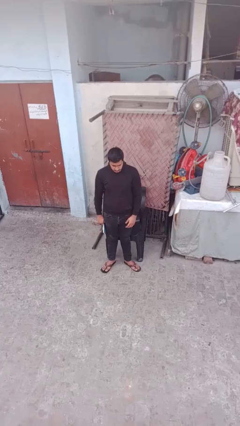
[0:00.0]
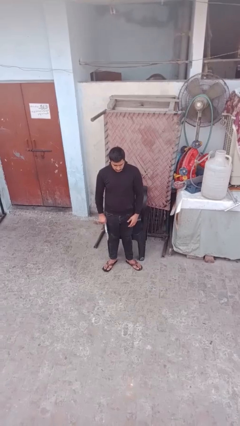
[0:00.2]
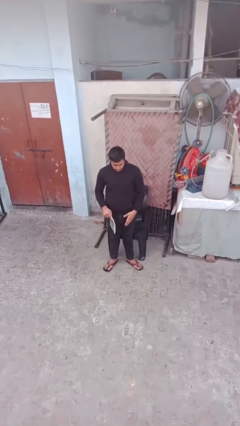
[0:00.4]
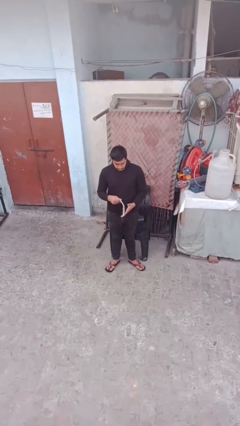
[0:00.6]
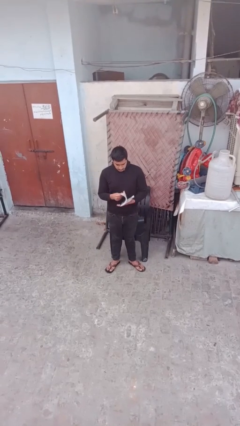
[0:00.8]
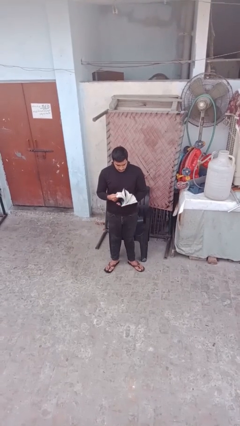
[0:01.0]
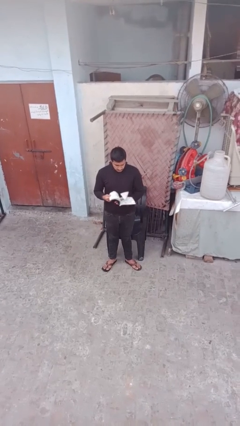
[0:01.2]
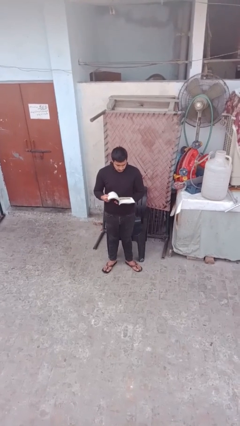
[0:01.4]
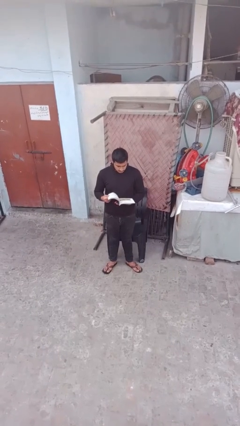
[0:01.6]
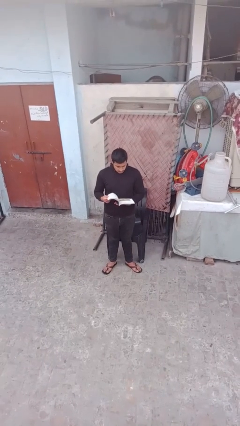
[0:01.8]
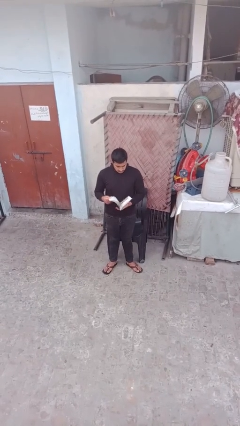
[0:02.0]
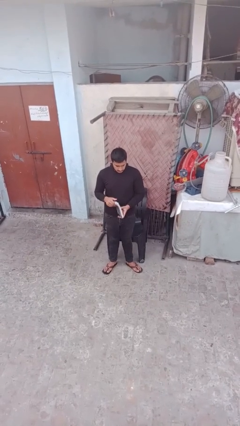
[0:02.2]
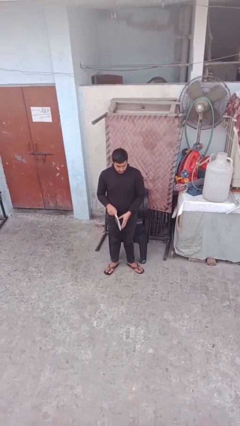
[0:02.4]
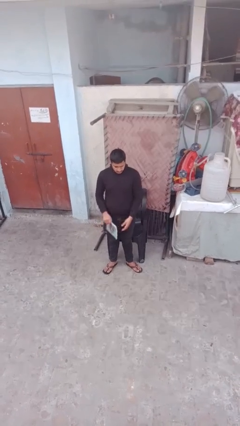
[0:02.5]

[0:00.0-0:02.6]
person reads document

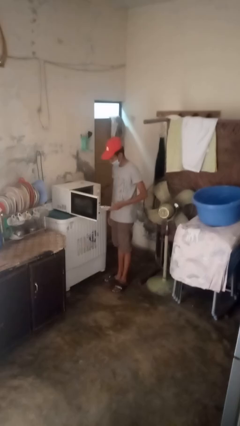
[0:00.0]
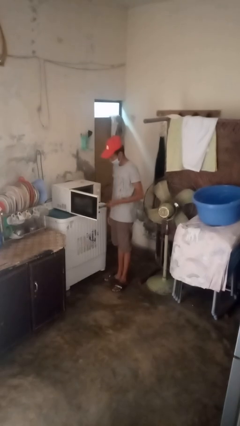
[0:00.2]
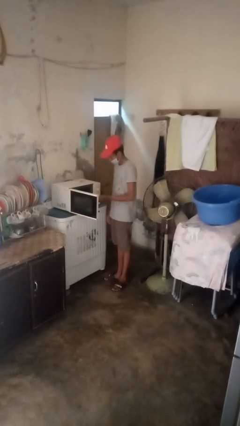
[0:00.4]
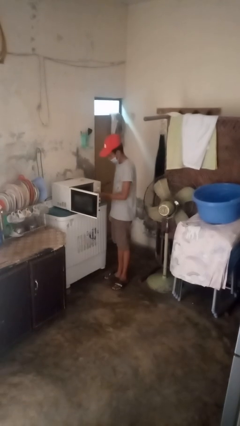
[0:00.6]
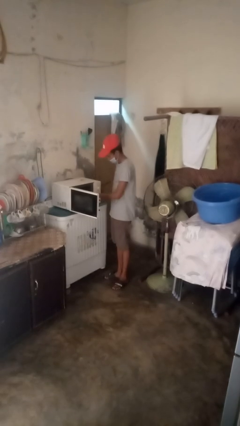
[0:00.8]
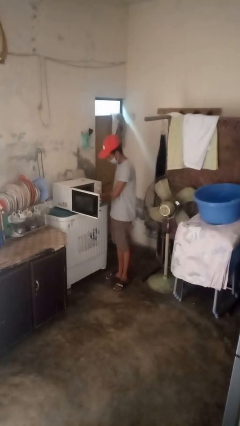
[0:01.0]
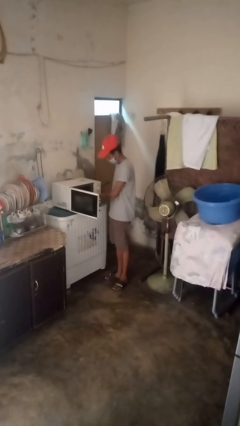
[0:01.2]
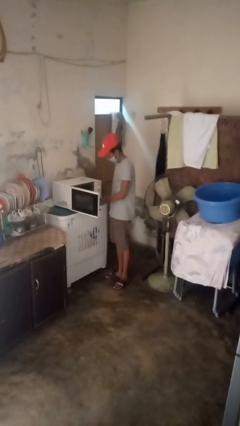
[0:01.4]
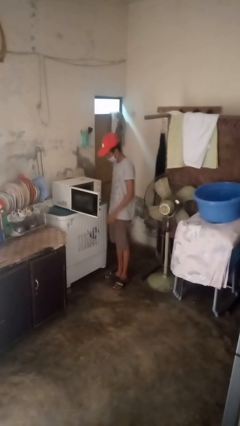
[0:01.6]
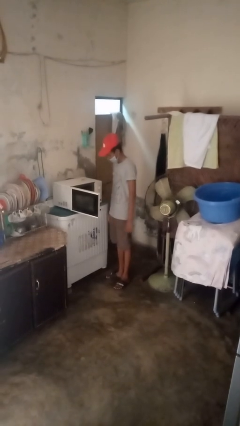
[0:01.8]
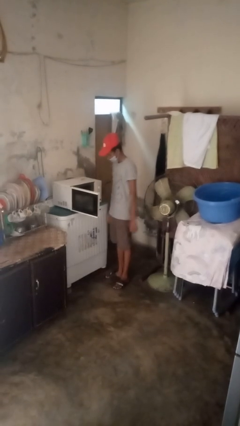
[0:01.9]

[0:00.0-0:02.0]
person puts object into microwave

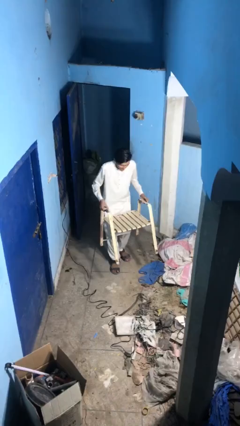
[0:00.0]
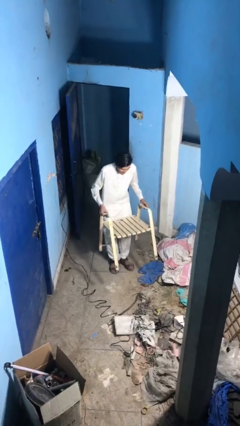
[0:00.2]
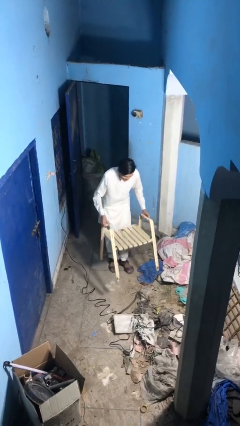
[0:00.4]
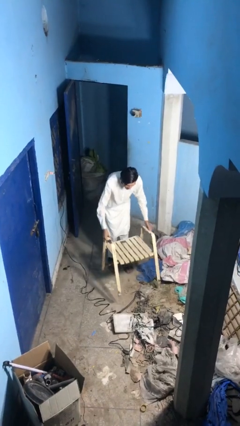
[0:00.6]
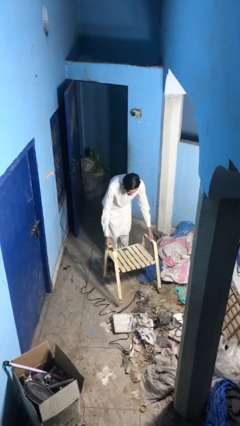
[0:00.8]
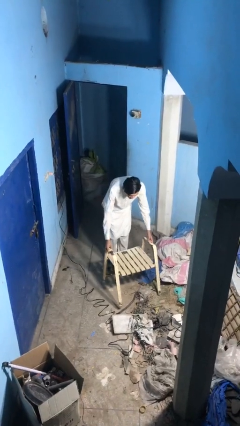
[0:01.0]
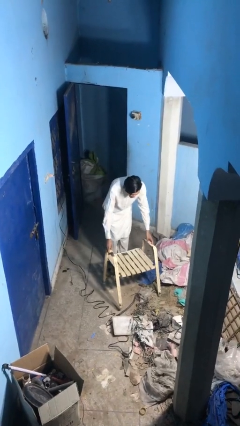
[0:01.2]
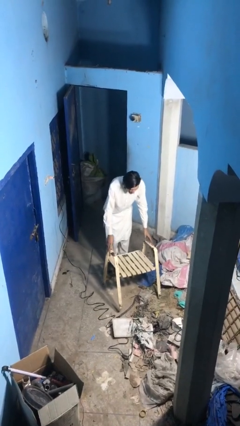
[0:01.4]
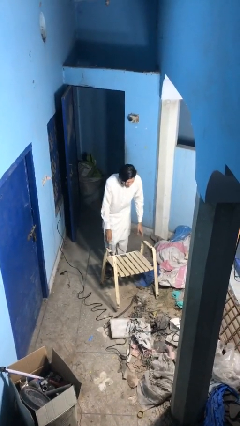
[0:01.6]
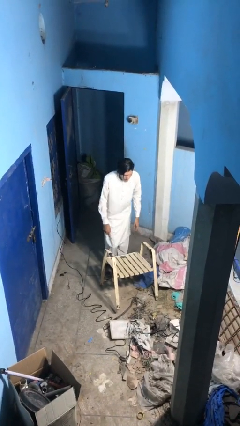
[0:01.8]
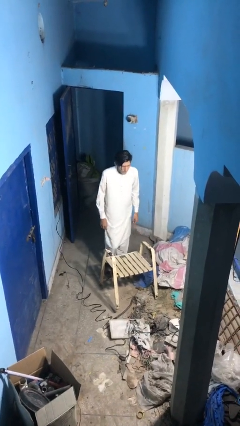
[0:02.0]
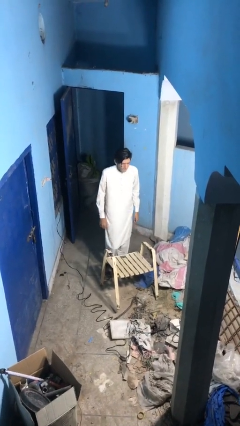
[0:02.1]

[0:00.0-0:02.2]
person puts down object on floor

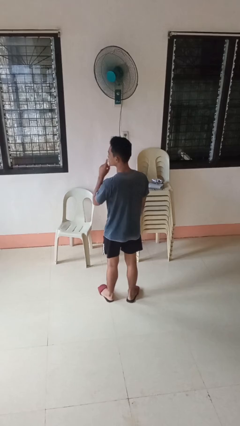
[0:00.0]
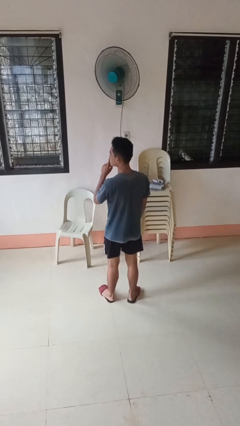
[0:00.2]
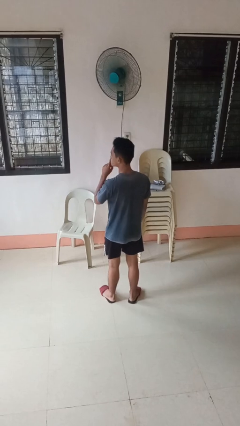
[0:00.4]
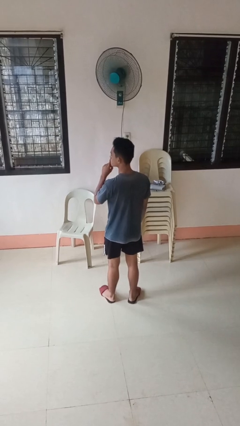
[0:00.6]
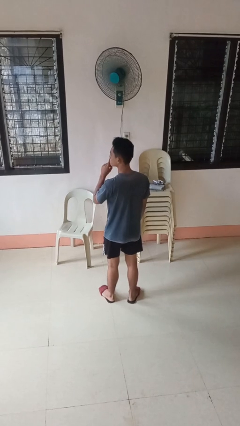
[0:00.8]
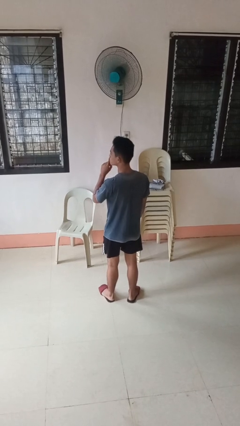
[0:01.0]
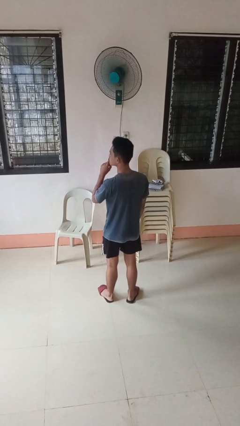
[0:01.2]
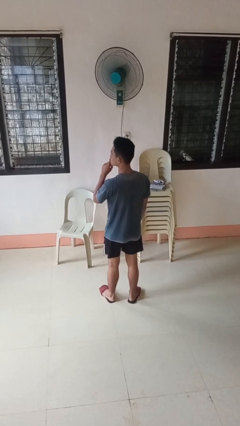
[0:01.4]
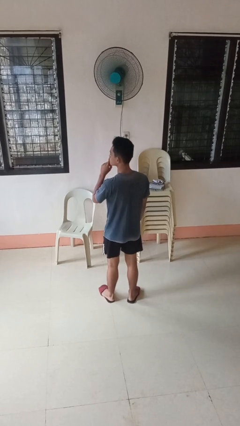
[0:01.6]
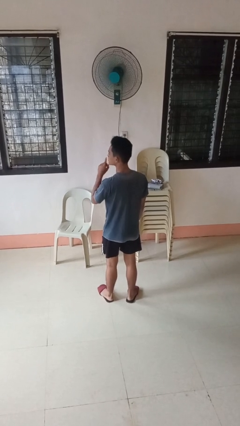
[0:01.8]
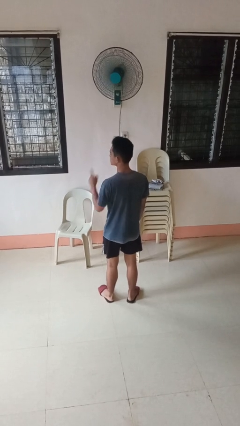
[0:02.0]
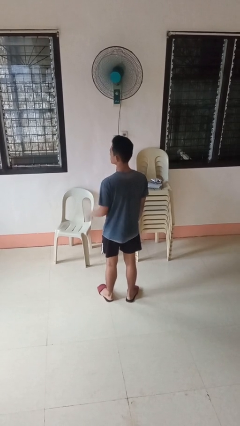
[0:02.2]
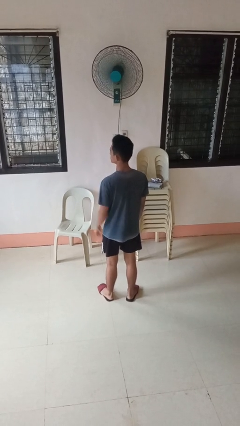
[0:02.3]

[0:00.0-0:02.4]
person gestures be quiet

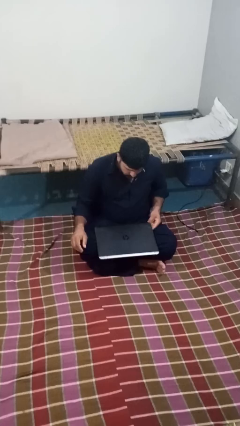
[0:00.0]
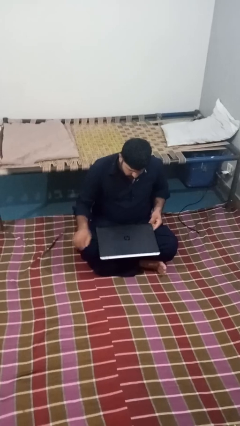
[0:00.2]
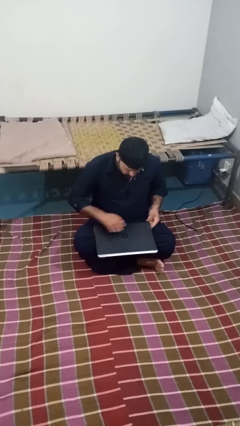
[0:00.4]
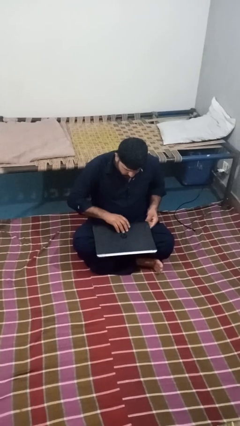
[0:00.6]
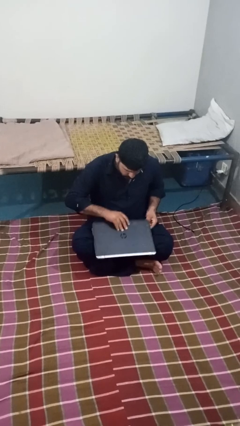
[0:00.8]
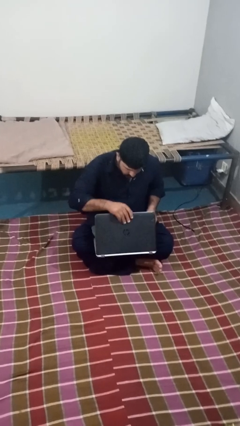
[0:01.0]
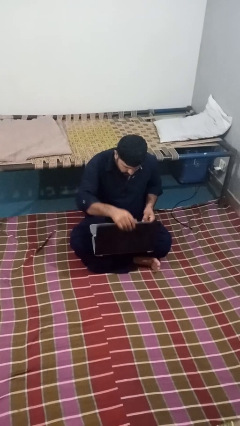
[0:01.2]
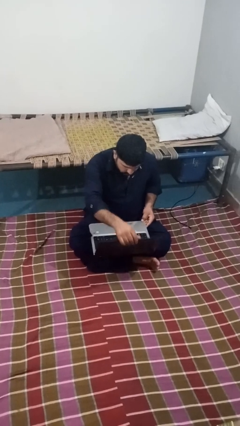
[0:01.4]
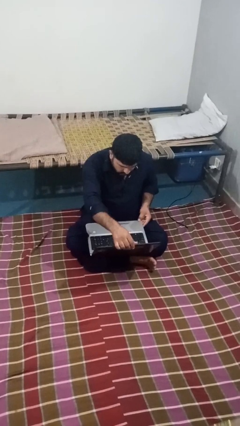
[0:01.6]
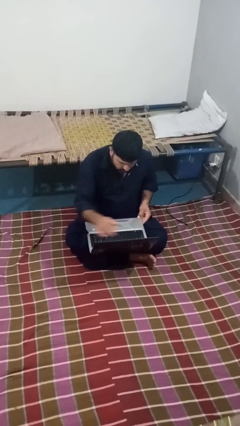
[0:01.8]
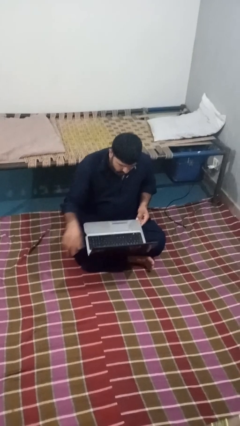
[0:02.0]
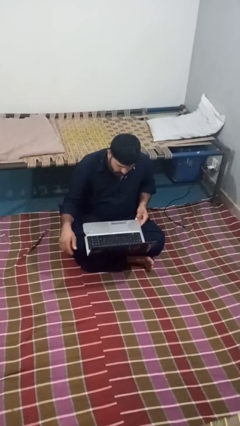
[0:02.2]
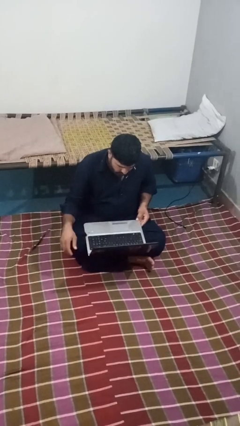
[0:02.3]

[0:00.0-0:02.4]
person opens laptop

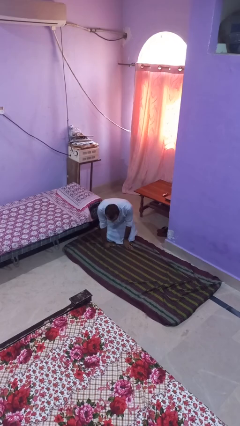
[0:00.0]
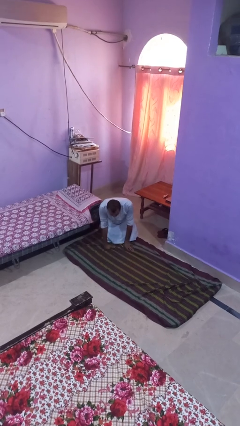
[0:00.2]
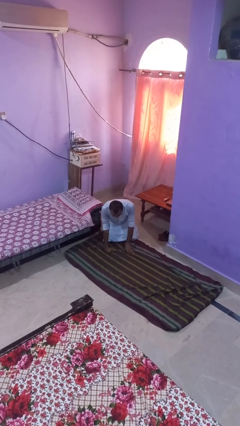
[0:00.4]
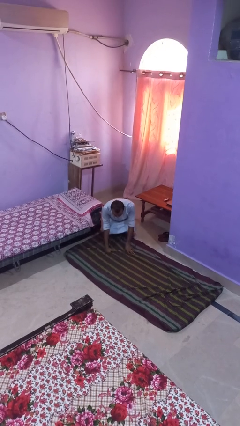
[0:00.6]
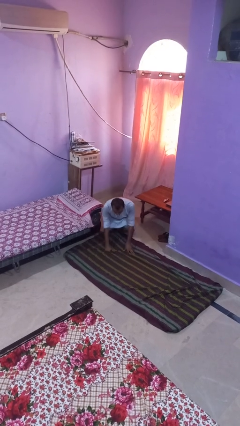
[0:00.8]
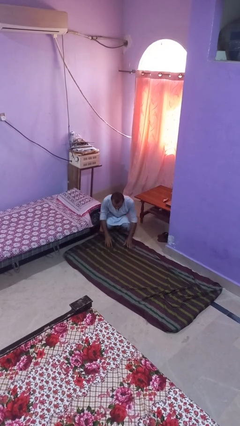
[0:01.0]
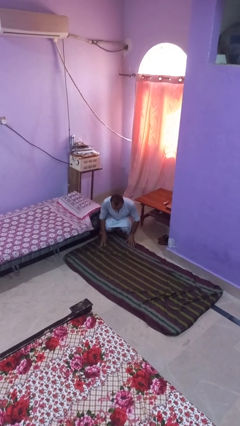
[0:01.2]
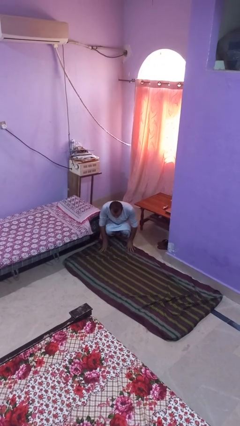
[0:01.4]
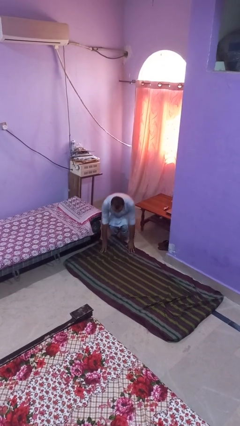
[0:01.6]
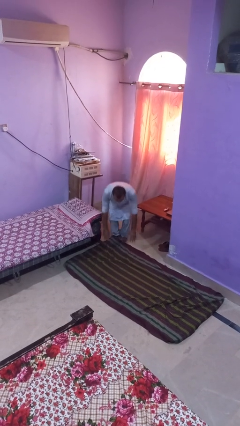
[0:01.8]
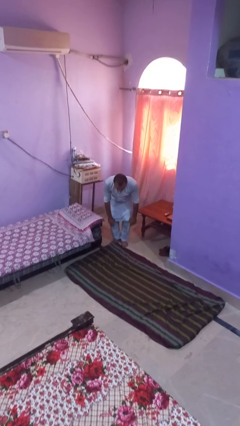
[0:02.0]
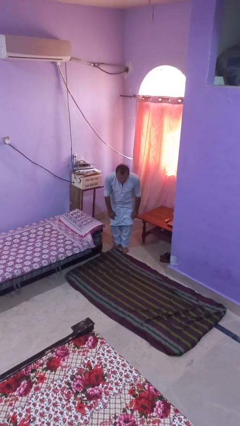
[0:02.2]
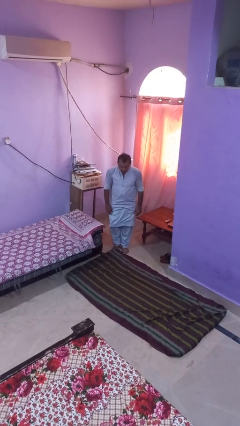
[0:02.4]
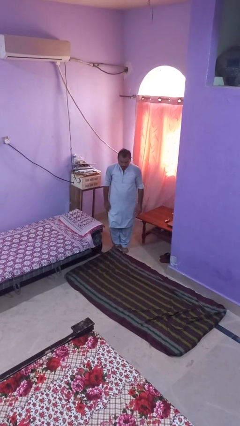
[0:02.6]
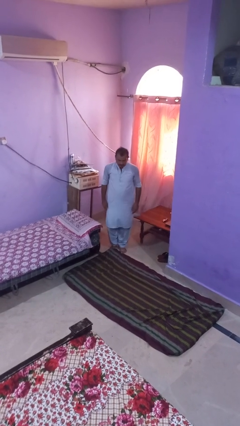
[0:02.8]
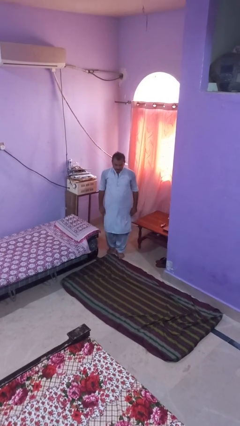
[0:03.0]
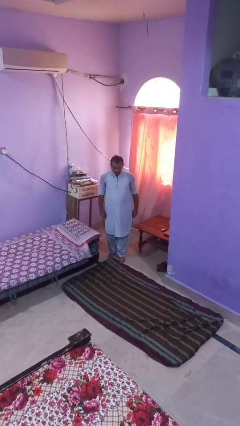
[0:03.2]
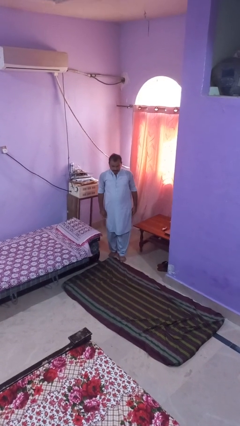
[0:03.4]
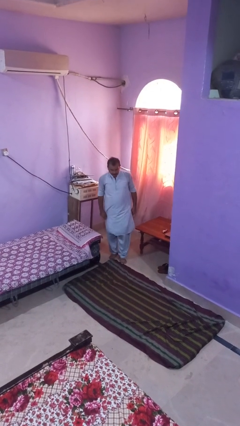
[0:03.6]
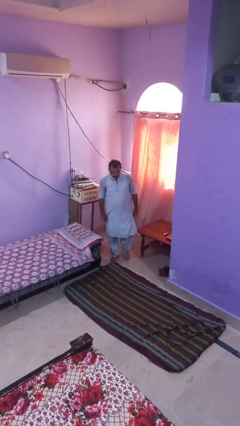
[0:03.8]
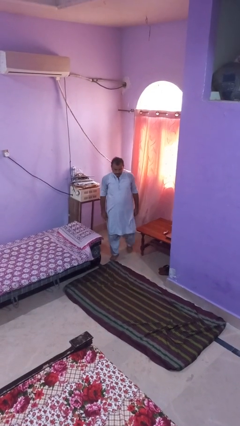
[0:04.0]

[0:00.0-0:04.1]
person stands up from floor

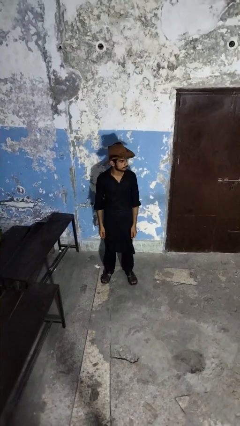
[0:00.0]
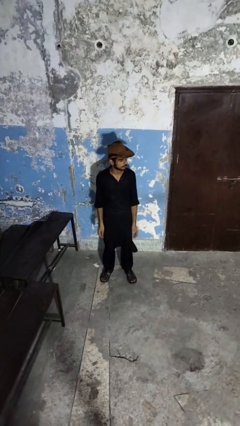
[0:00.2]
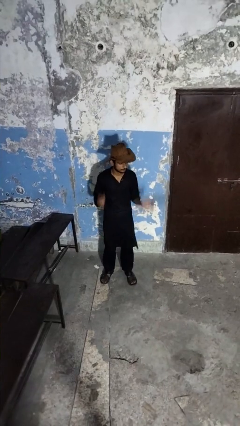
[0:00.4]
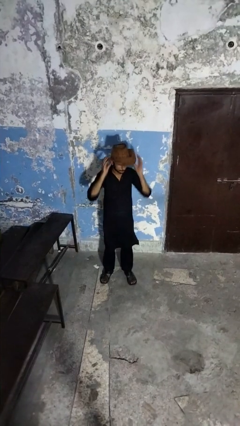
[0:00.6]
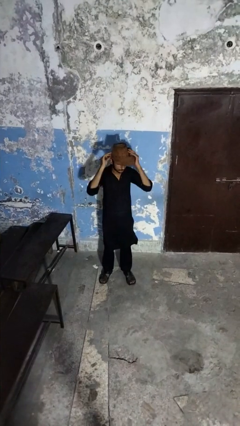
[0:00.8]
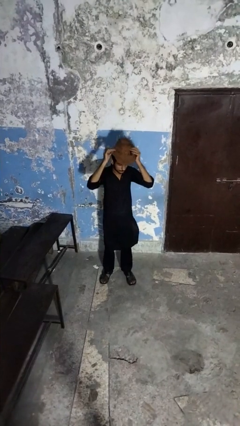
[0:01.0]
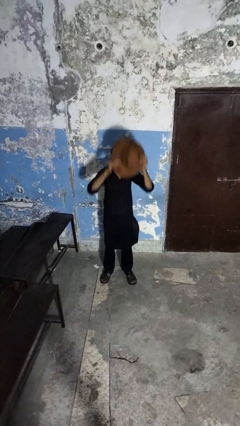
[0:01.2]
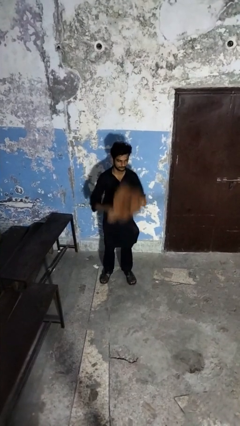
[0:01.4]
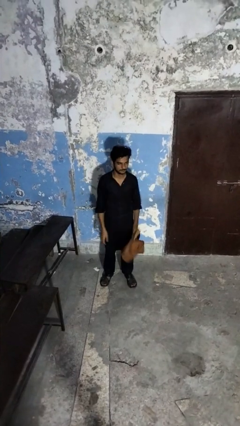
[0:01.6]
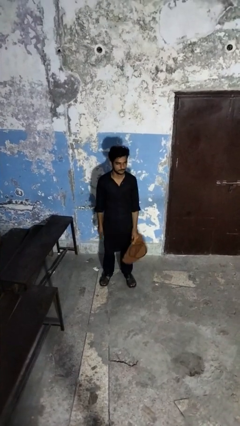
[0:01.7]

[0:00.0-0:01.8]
person takes off hat
